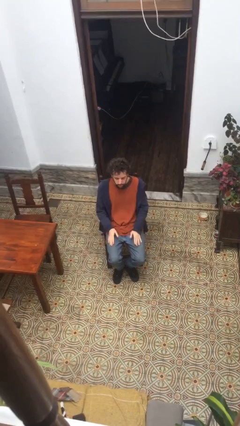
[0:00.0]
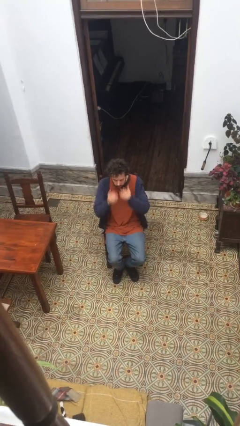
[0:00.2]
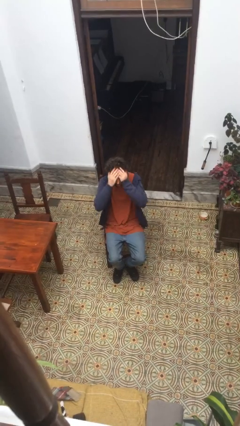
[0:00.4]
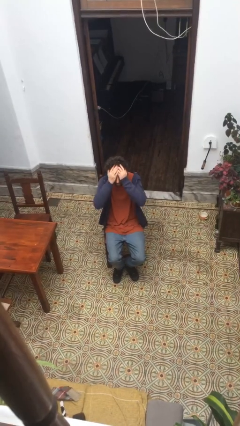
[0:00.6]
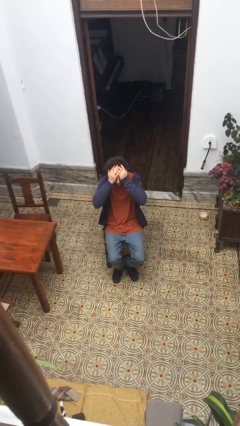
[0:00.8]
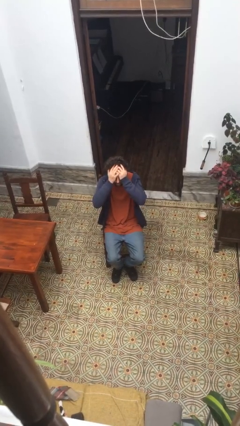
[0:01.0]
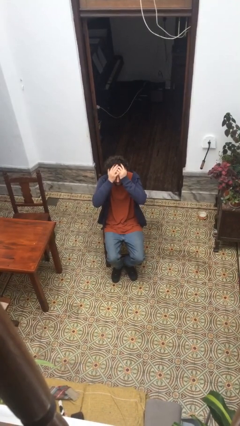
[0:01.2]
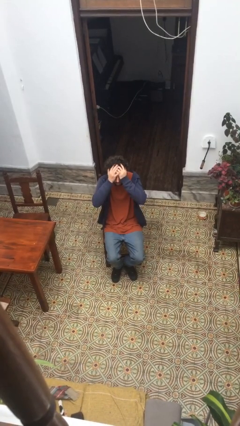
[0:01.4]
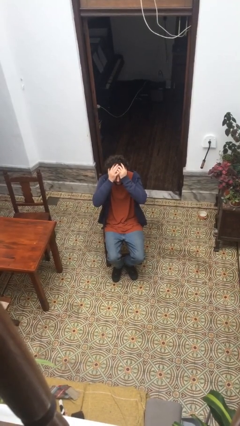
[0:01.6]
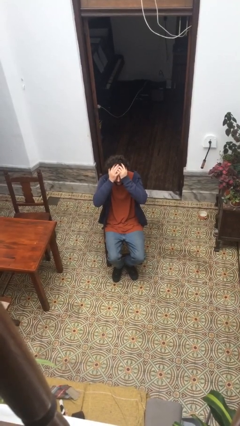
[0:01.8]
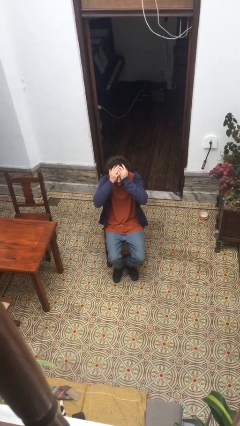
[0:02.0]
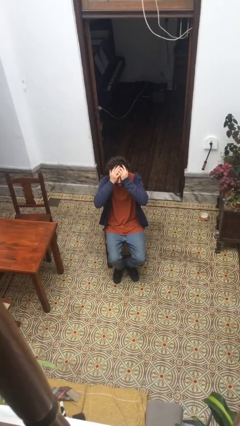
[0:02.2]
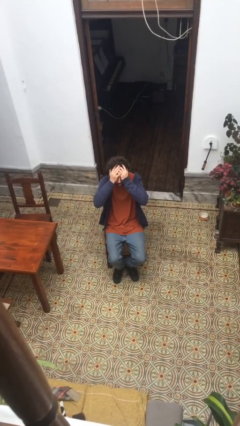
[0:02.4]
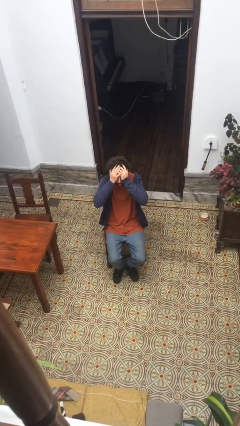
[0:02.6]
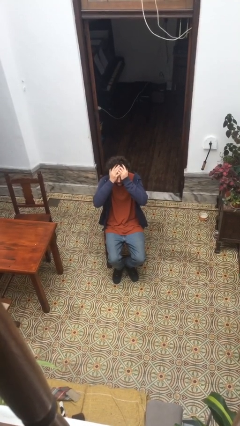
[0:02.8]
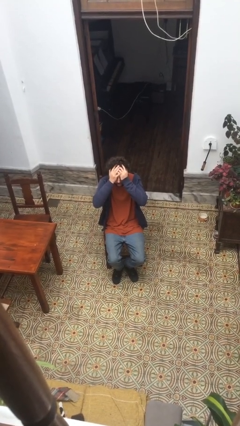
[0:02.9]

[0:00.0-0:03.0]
person covers face with hands

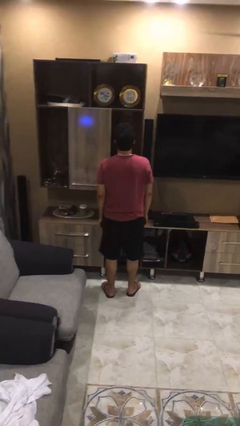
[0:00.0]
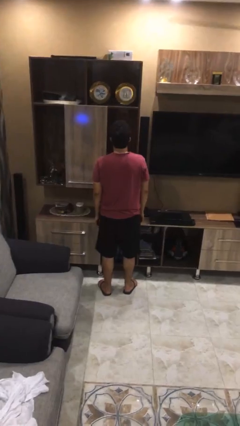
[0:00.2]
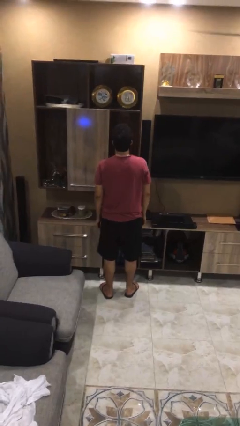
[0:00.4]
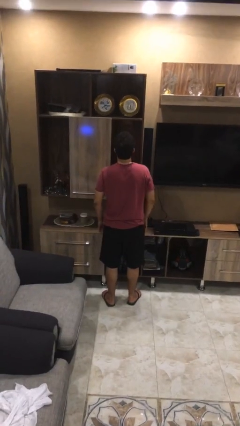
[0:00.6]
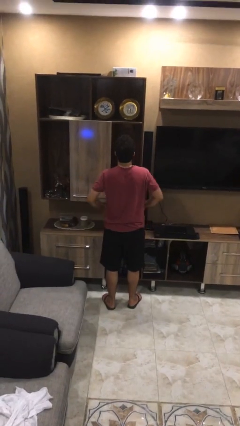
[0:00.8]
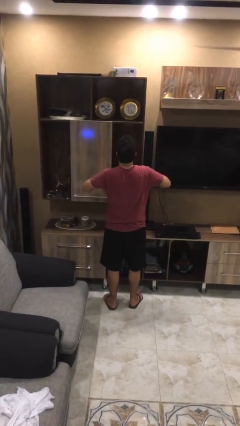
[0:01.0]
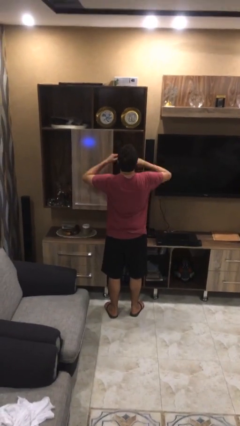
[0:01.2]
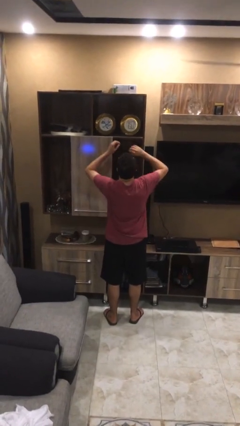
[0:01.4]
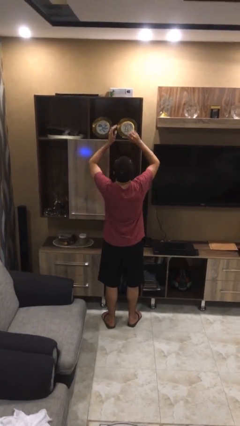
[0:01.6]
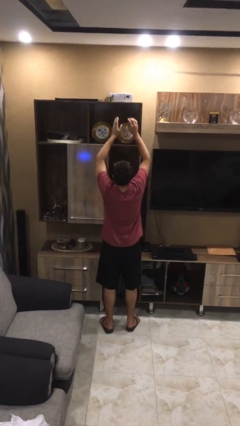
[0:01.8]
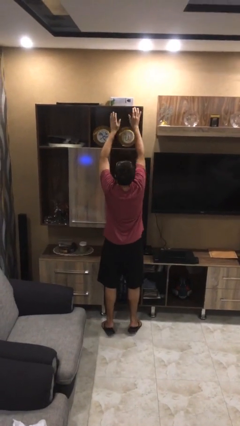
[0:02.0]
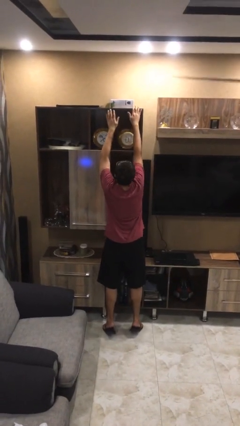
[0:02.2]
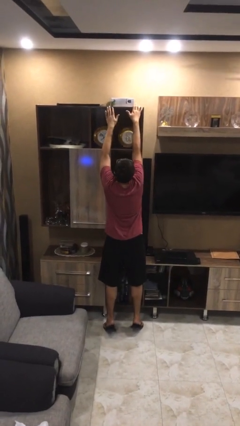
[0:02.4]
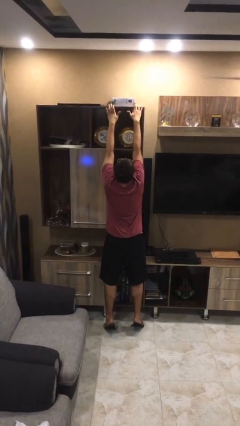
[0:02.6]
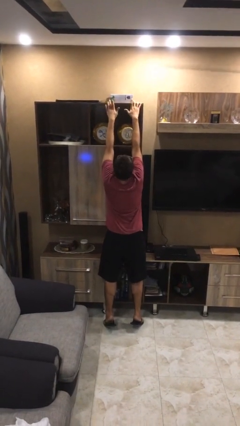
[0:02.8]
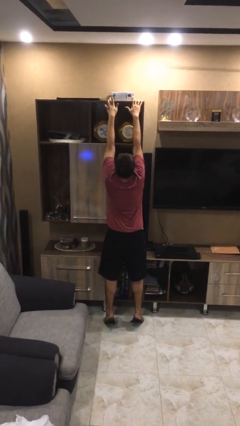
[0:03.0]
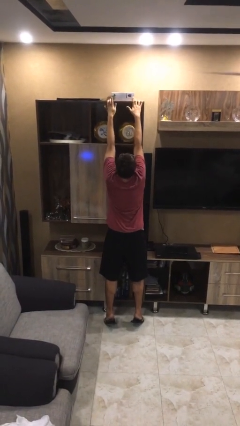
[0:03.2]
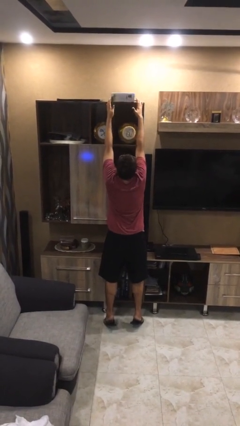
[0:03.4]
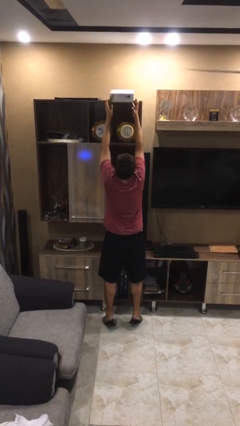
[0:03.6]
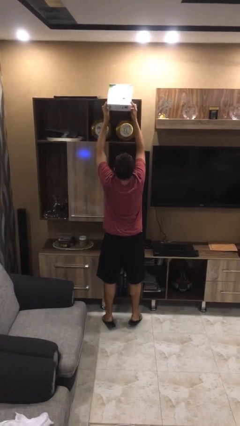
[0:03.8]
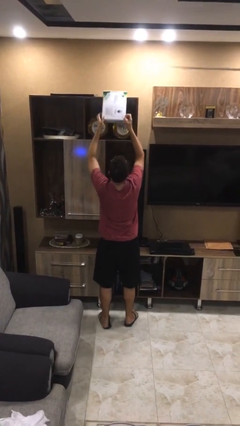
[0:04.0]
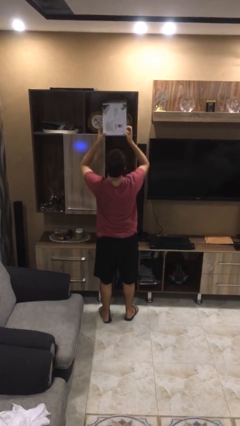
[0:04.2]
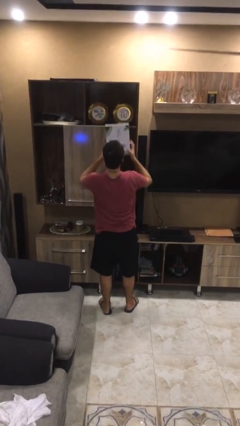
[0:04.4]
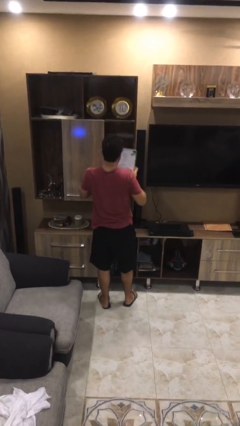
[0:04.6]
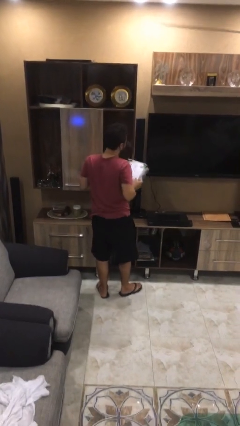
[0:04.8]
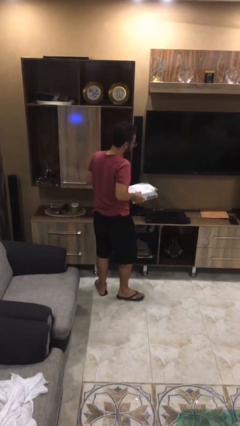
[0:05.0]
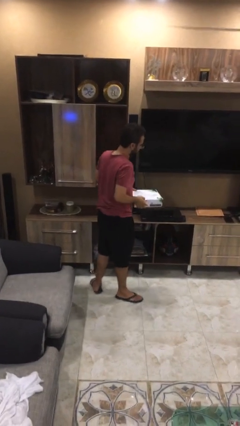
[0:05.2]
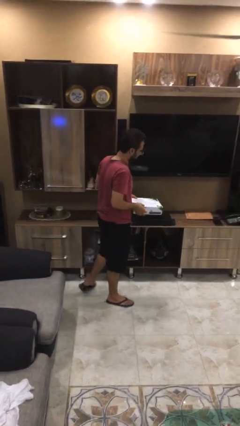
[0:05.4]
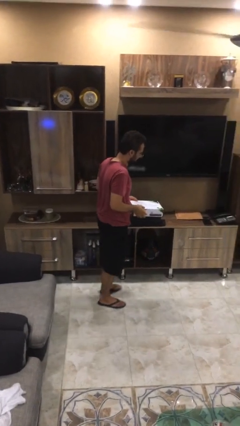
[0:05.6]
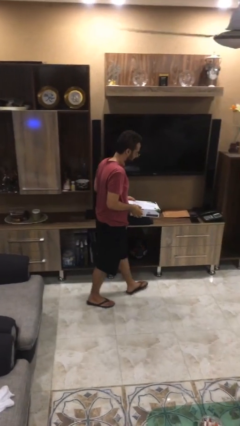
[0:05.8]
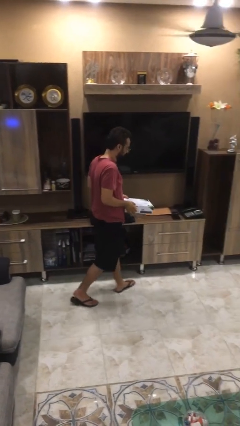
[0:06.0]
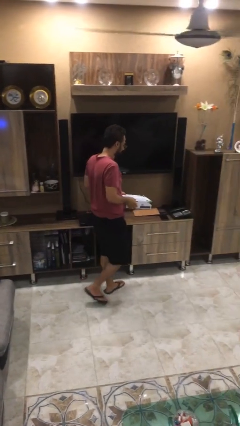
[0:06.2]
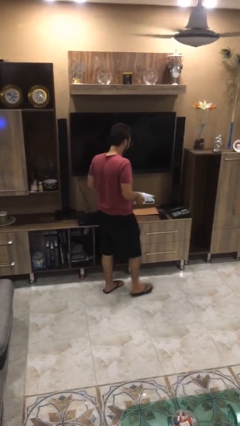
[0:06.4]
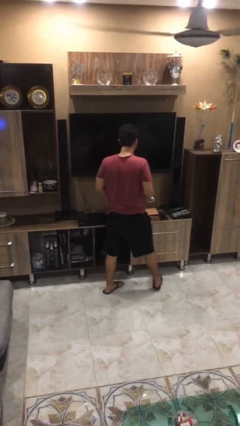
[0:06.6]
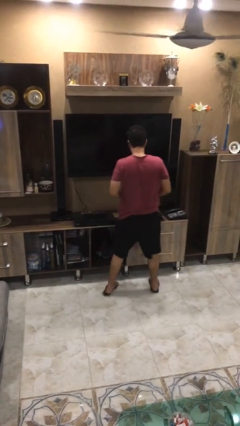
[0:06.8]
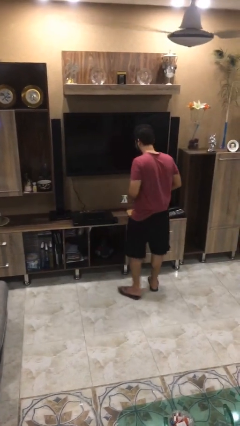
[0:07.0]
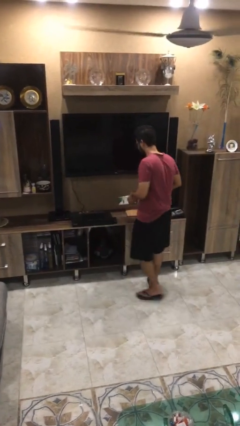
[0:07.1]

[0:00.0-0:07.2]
person picks up object from shelf

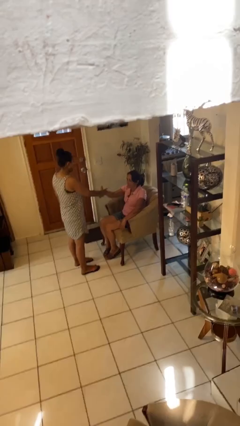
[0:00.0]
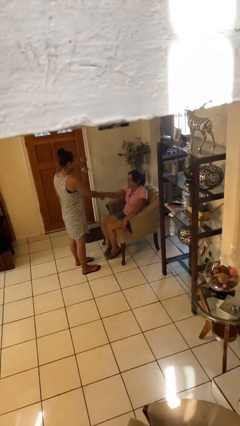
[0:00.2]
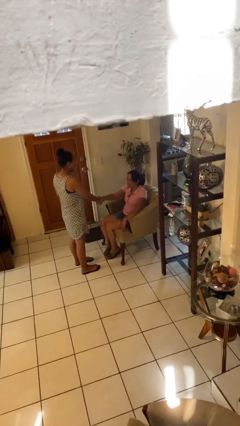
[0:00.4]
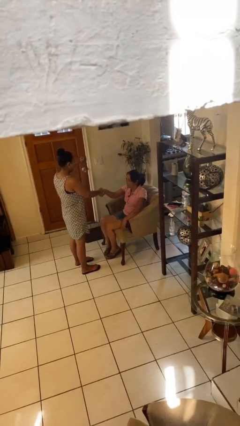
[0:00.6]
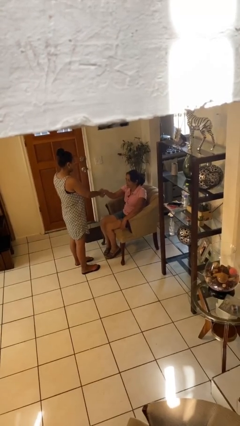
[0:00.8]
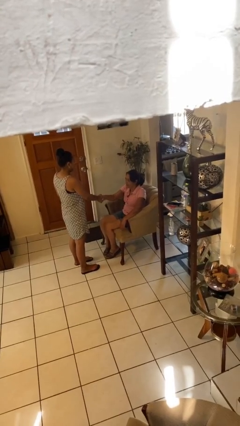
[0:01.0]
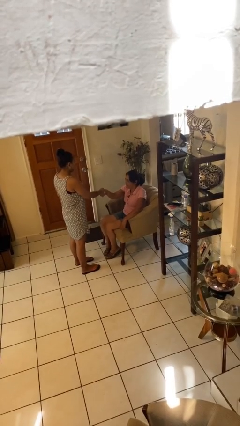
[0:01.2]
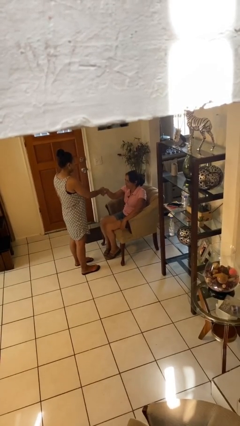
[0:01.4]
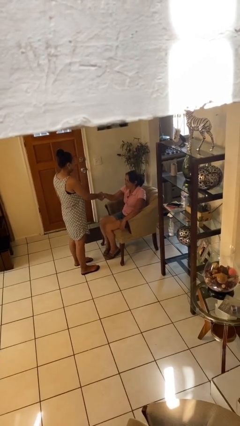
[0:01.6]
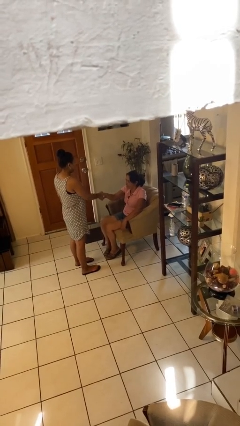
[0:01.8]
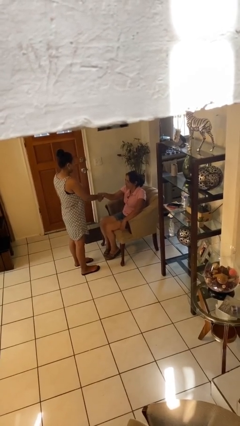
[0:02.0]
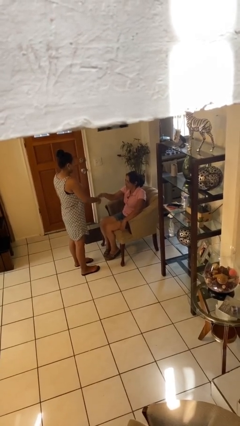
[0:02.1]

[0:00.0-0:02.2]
person shakes hand

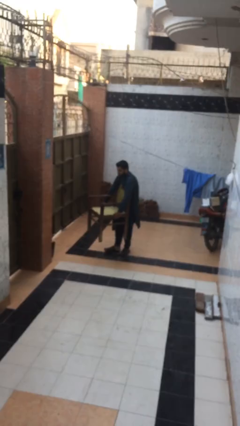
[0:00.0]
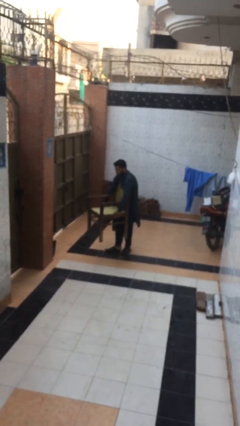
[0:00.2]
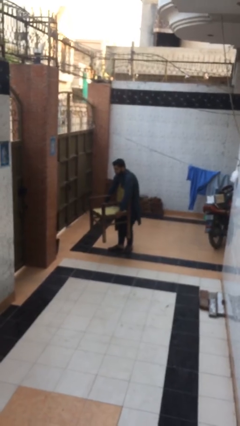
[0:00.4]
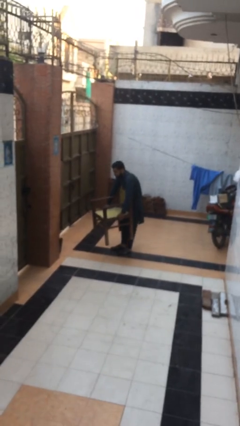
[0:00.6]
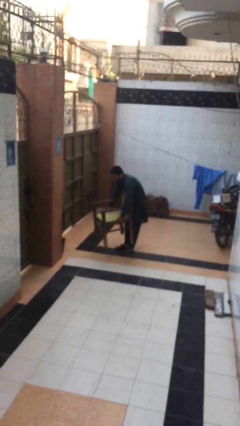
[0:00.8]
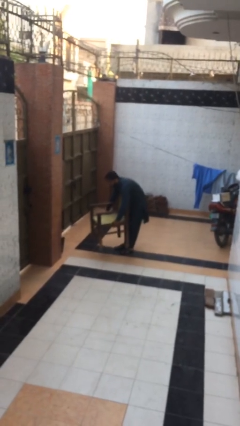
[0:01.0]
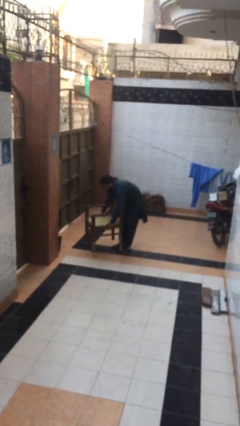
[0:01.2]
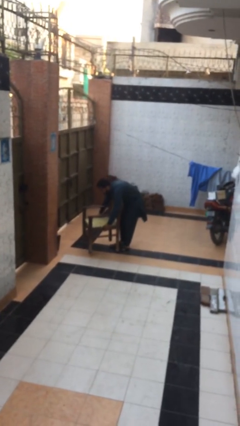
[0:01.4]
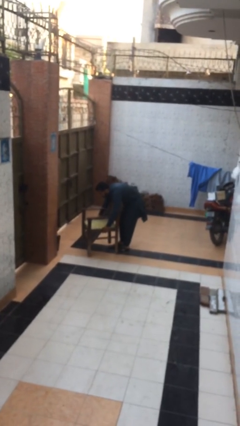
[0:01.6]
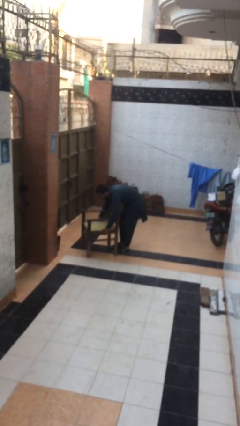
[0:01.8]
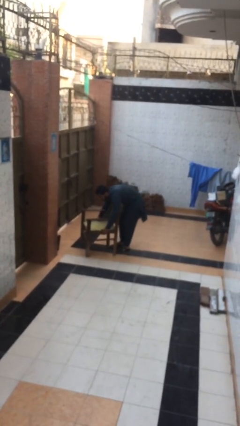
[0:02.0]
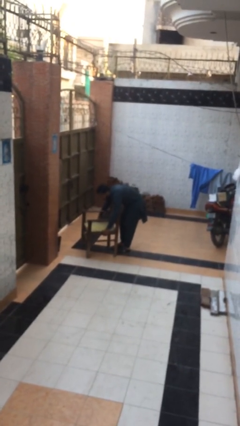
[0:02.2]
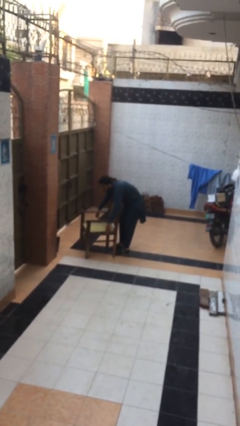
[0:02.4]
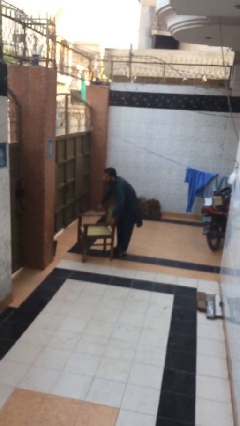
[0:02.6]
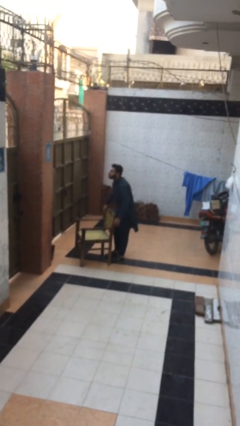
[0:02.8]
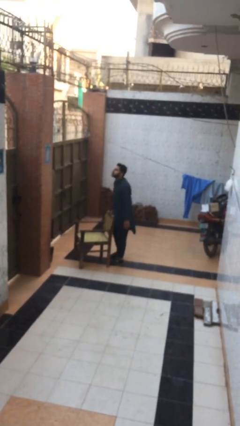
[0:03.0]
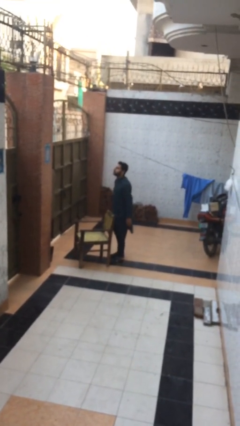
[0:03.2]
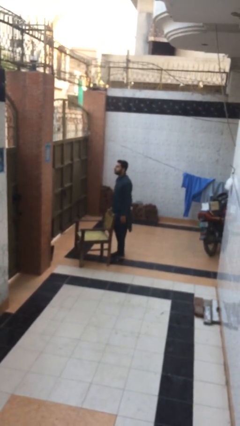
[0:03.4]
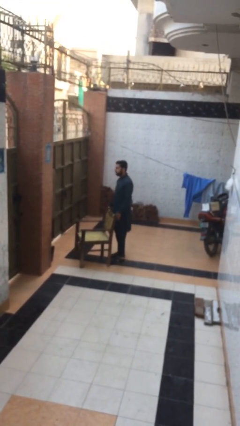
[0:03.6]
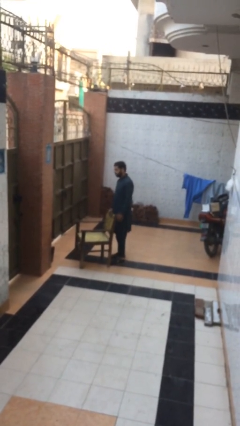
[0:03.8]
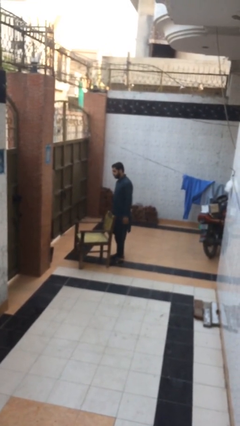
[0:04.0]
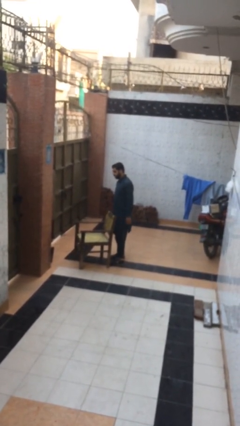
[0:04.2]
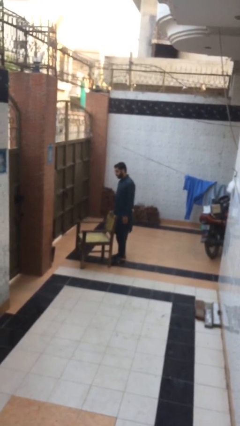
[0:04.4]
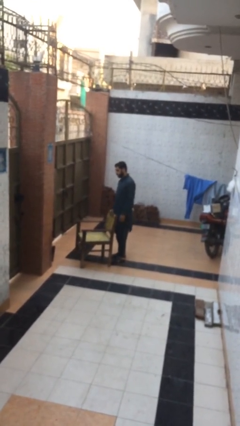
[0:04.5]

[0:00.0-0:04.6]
person puts down object on floor

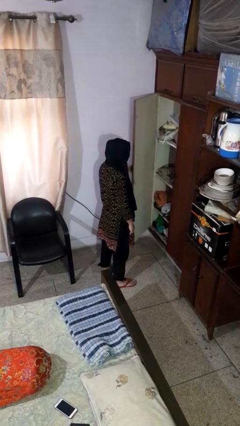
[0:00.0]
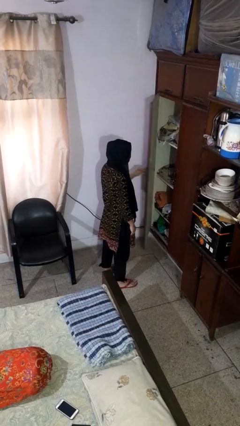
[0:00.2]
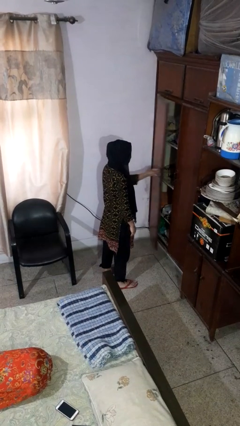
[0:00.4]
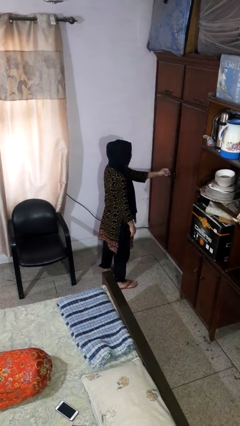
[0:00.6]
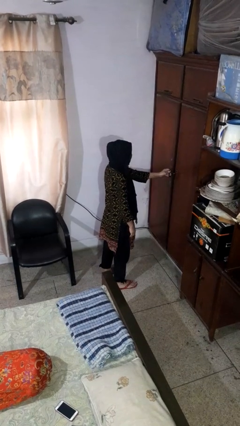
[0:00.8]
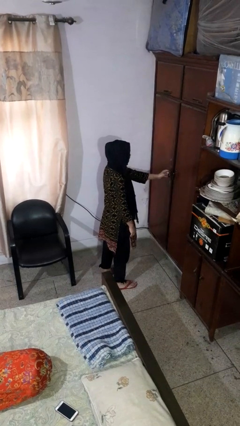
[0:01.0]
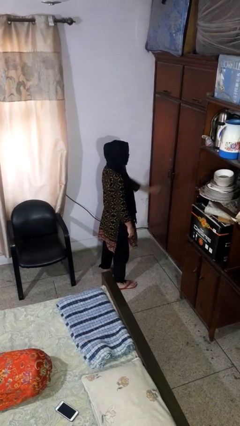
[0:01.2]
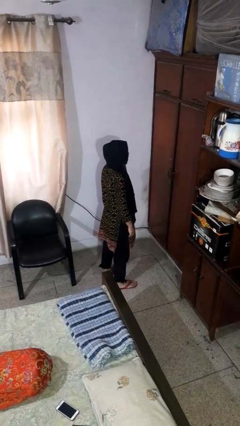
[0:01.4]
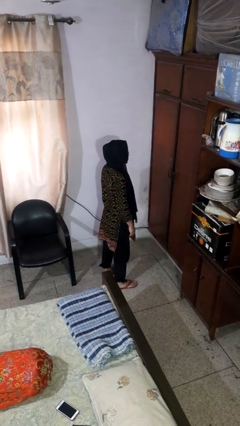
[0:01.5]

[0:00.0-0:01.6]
person closes closet door
